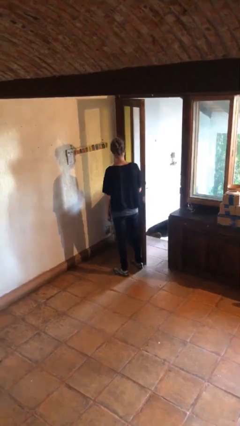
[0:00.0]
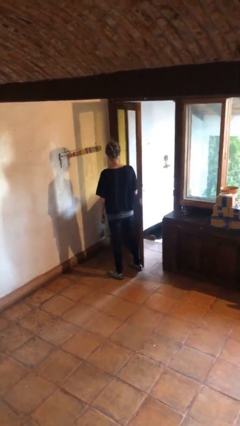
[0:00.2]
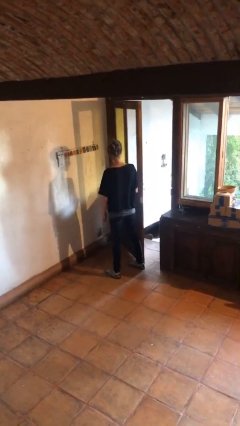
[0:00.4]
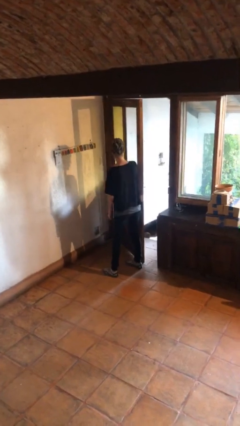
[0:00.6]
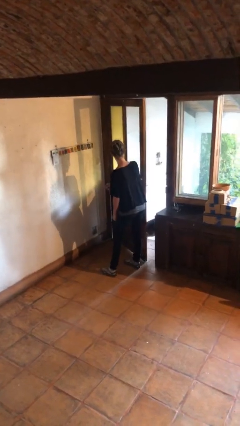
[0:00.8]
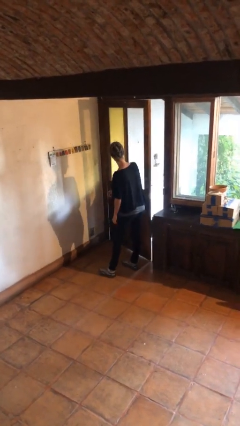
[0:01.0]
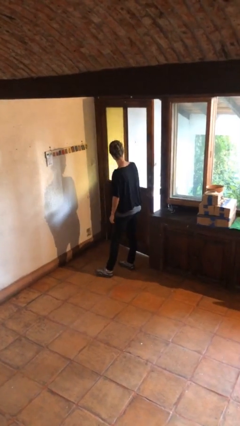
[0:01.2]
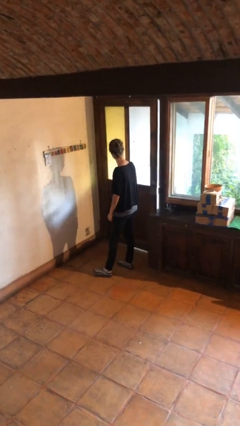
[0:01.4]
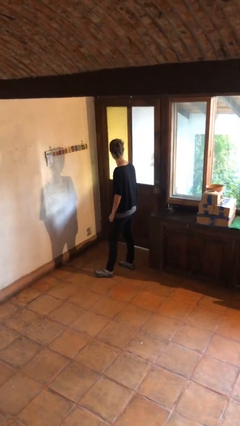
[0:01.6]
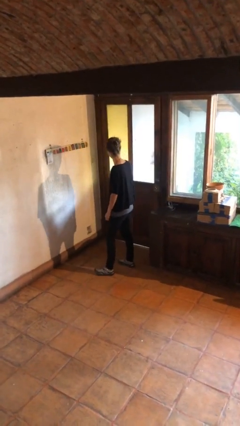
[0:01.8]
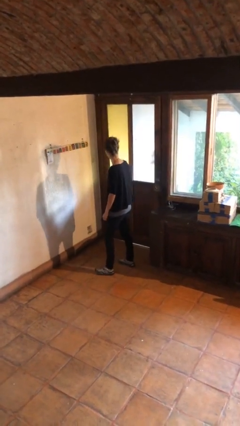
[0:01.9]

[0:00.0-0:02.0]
person closes door with hip

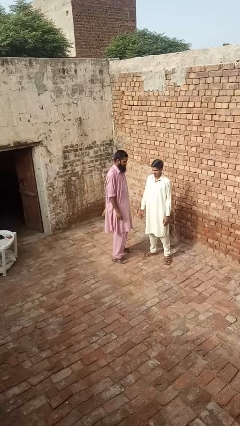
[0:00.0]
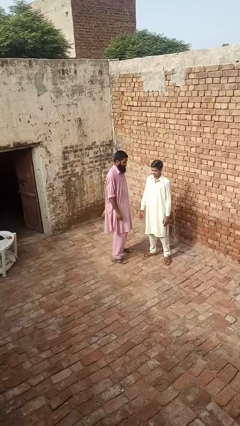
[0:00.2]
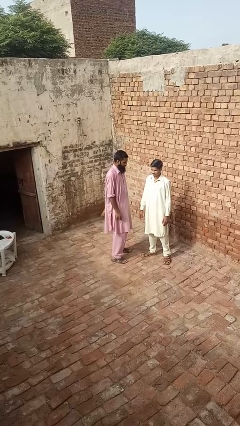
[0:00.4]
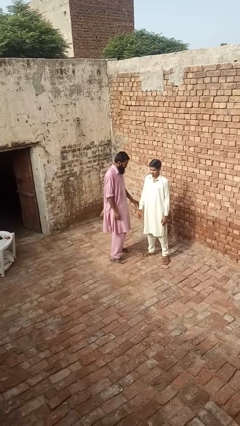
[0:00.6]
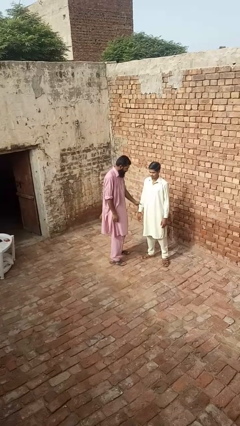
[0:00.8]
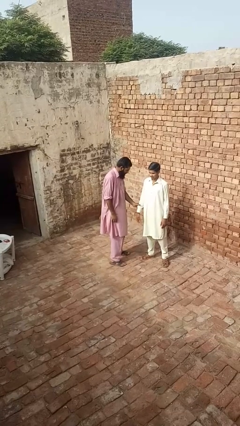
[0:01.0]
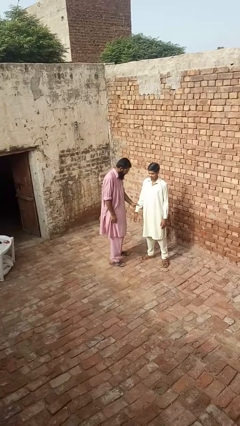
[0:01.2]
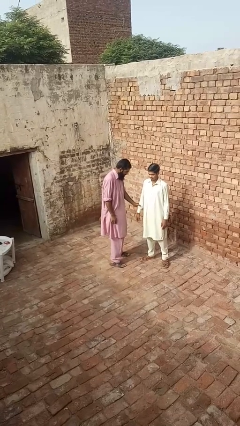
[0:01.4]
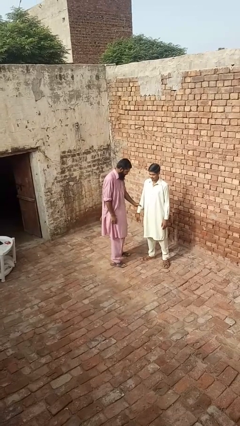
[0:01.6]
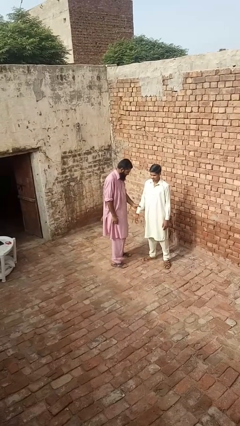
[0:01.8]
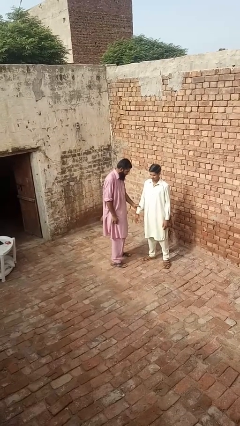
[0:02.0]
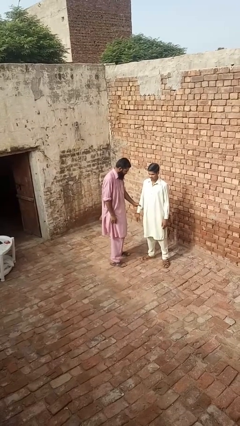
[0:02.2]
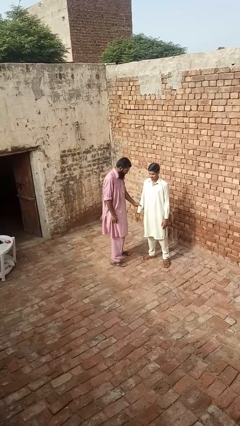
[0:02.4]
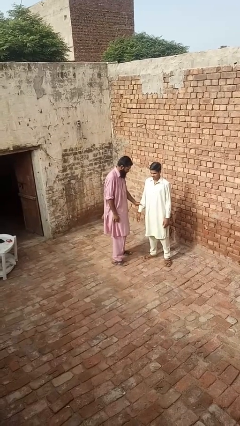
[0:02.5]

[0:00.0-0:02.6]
person grabs person by forearm

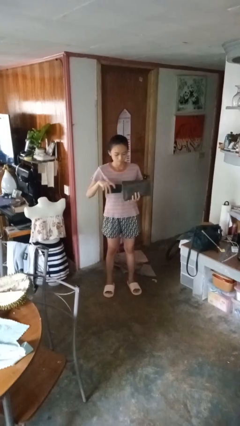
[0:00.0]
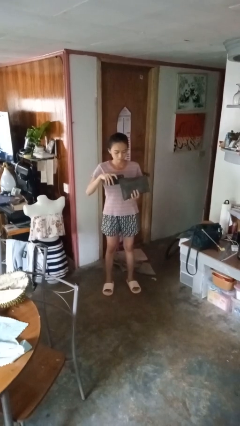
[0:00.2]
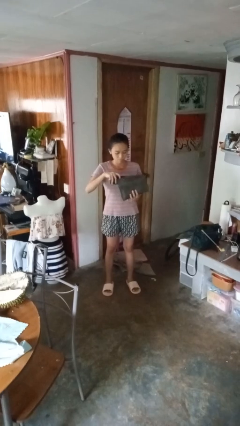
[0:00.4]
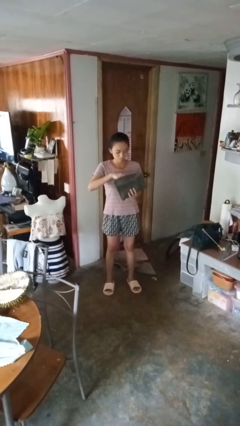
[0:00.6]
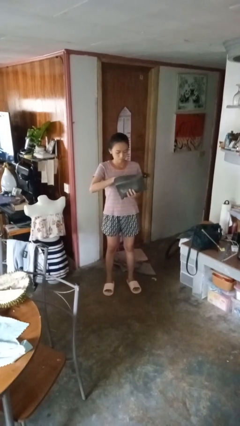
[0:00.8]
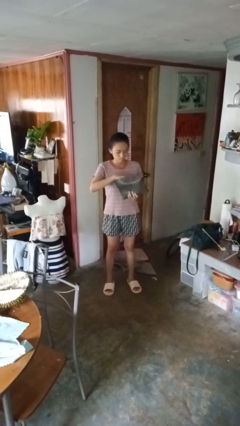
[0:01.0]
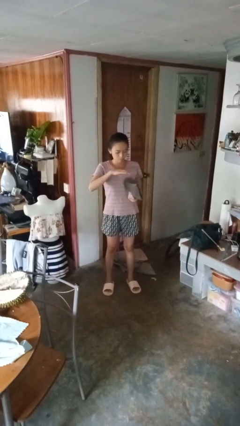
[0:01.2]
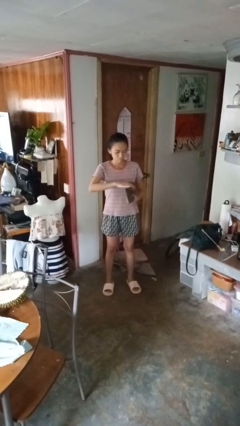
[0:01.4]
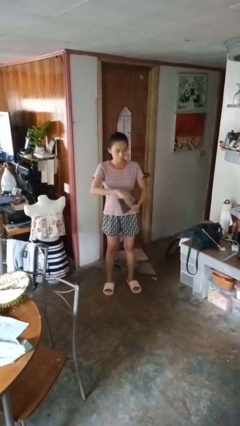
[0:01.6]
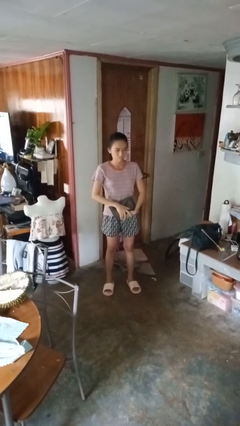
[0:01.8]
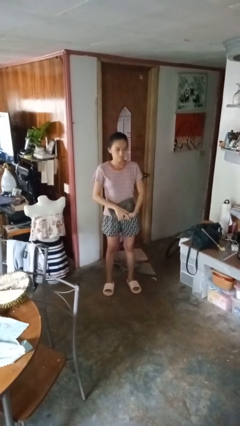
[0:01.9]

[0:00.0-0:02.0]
person puts object into purse

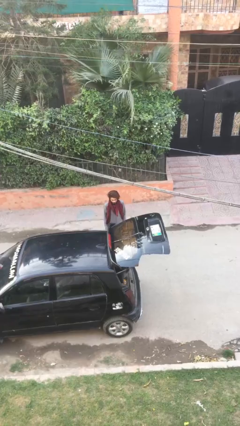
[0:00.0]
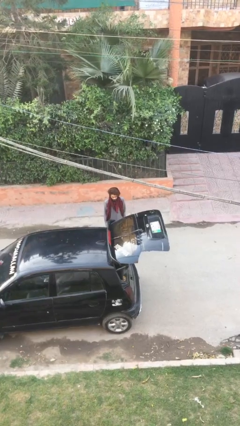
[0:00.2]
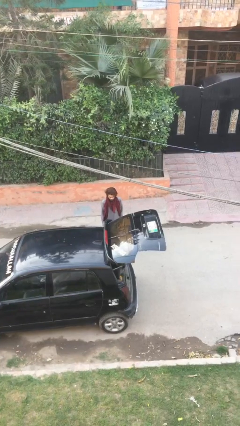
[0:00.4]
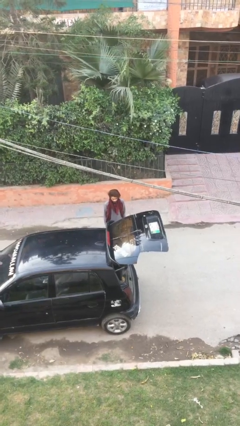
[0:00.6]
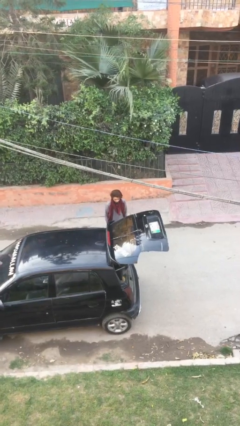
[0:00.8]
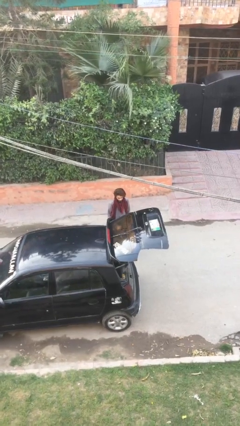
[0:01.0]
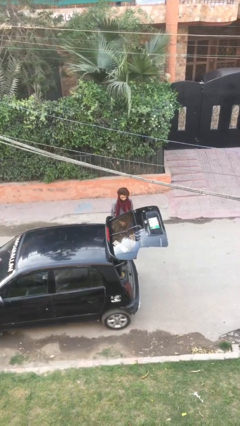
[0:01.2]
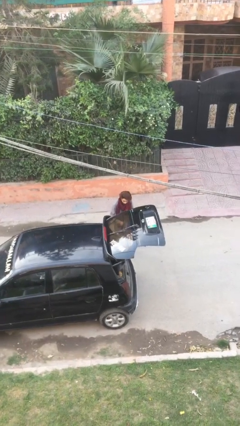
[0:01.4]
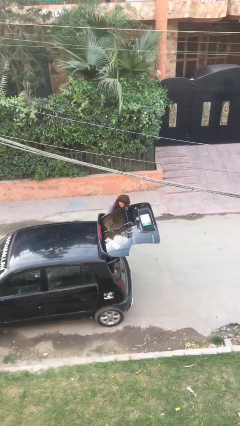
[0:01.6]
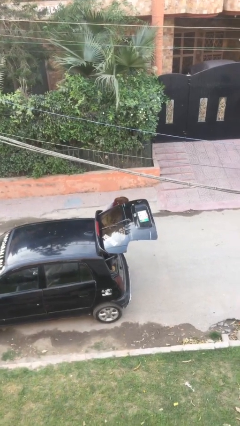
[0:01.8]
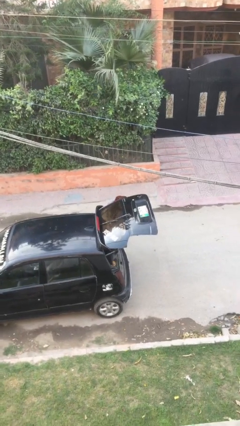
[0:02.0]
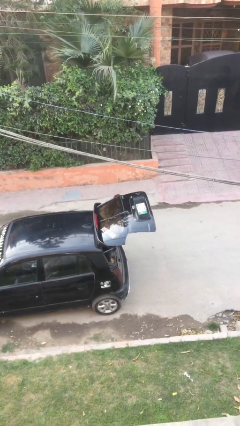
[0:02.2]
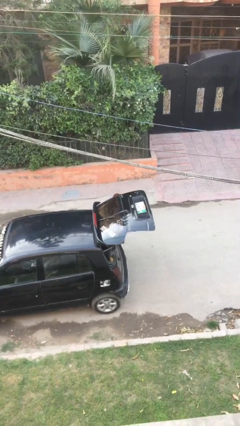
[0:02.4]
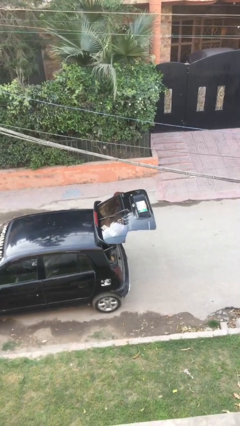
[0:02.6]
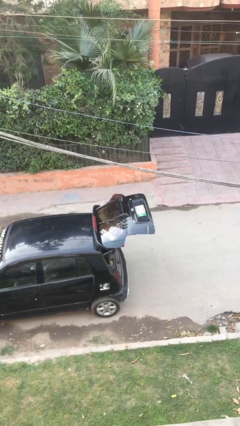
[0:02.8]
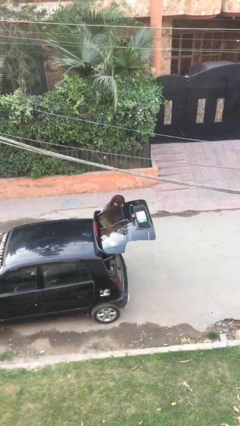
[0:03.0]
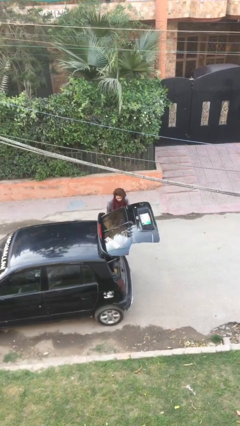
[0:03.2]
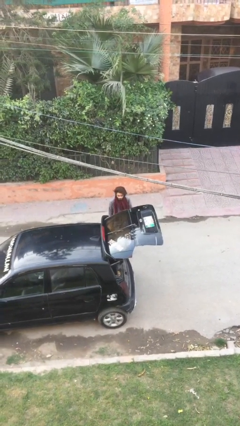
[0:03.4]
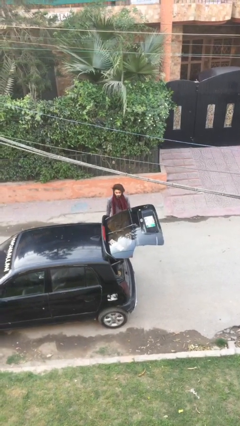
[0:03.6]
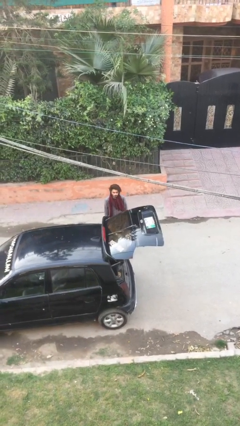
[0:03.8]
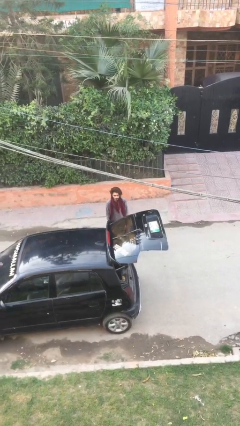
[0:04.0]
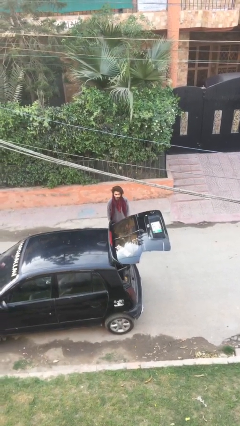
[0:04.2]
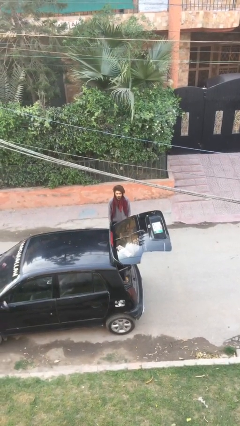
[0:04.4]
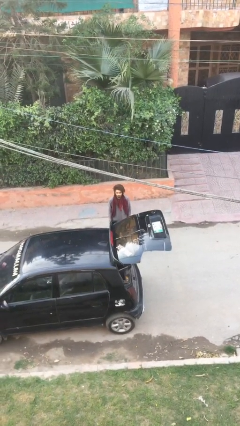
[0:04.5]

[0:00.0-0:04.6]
person loads car

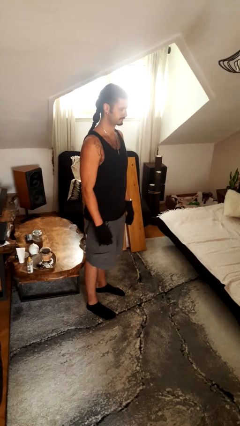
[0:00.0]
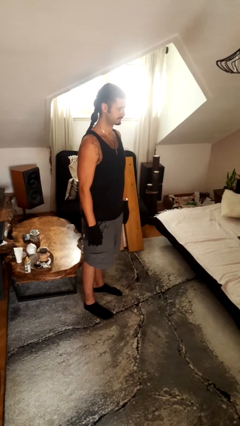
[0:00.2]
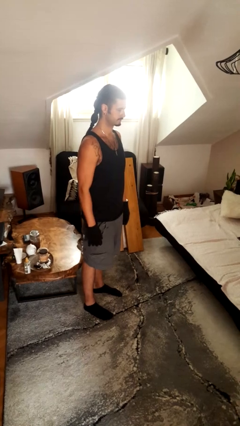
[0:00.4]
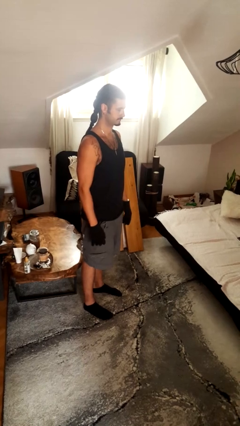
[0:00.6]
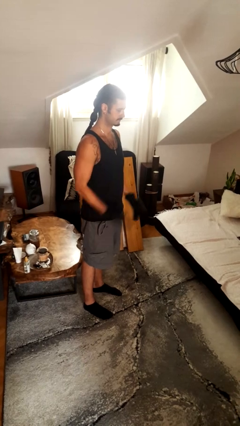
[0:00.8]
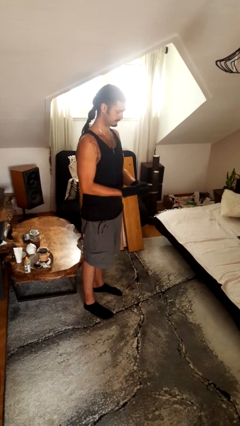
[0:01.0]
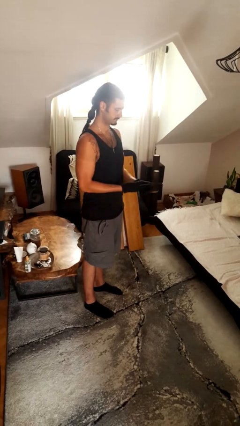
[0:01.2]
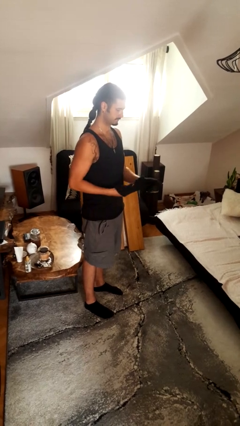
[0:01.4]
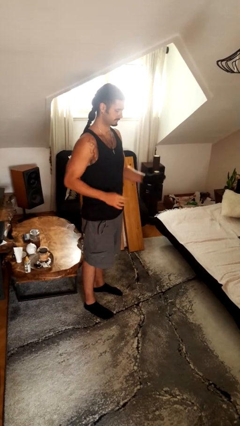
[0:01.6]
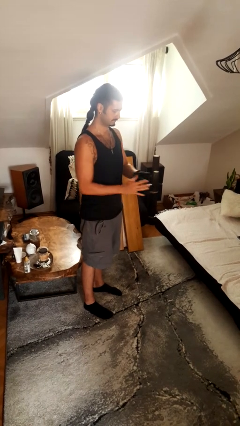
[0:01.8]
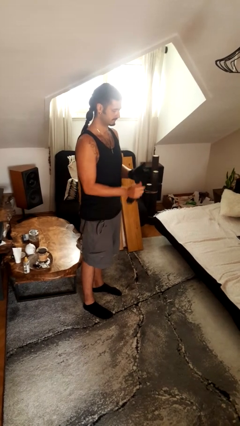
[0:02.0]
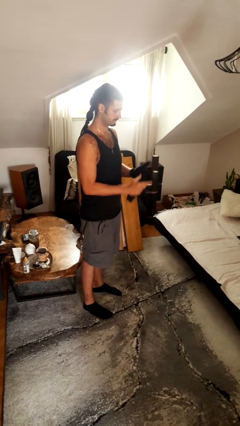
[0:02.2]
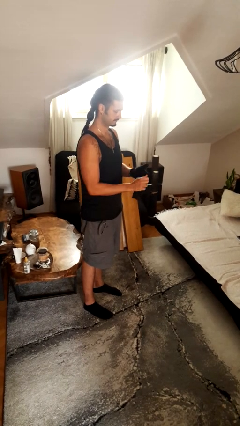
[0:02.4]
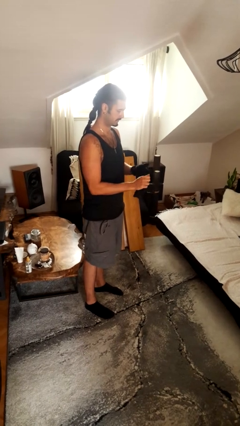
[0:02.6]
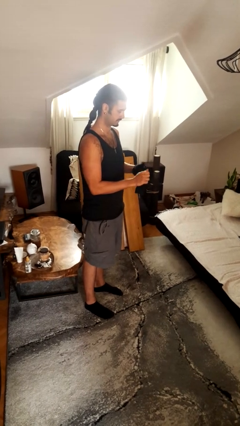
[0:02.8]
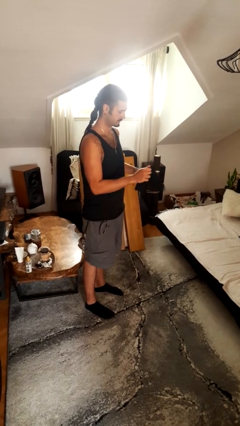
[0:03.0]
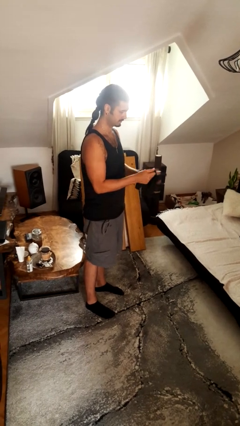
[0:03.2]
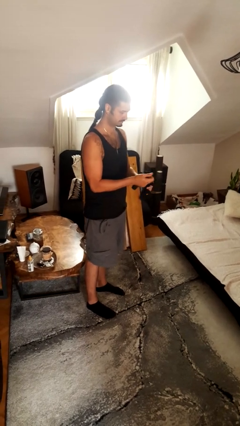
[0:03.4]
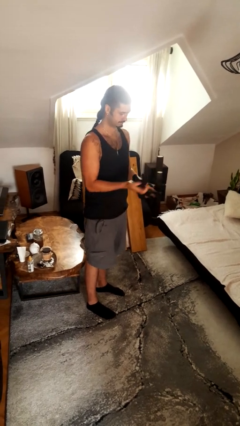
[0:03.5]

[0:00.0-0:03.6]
person takes off gloves

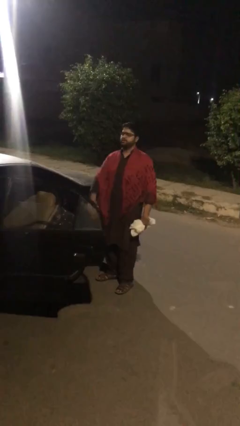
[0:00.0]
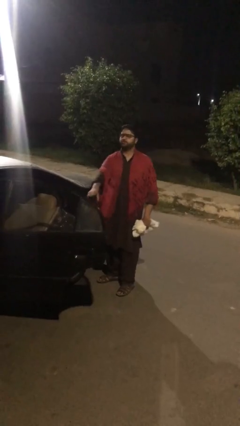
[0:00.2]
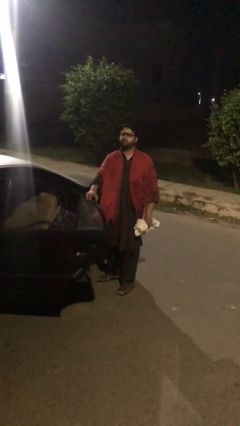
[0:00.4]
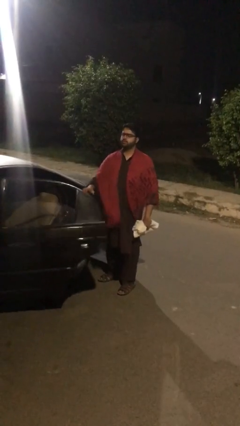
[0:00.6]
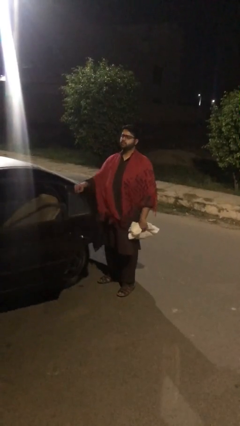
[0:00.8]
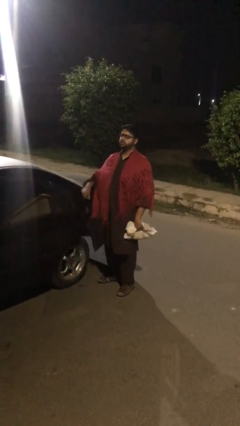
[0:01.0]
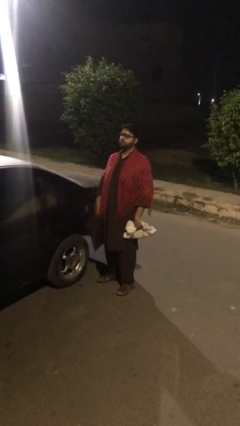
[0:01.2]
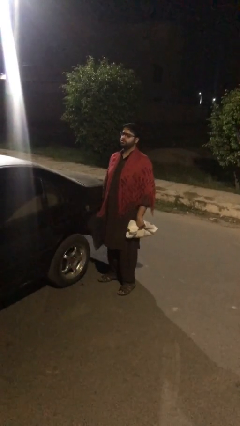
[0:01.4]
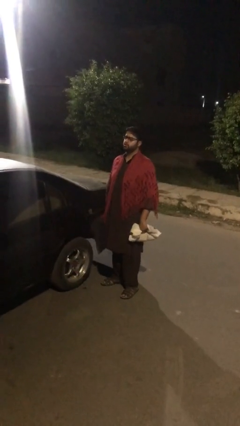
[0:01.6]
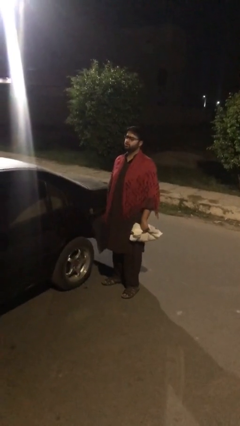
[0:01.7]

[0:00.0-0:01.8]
person closes car door

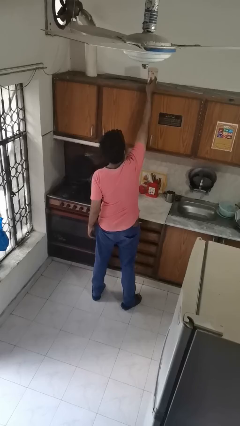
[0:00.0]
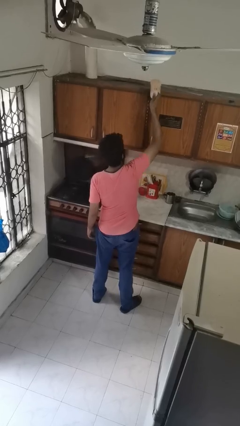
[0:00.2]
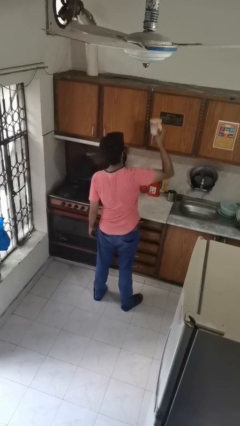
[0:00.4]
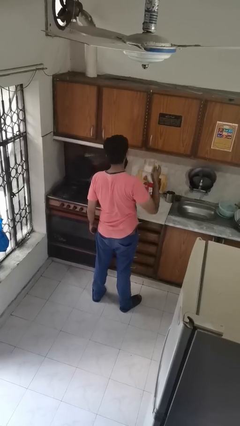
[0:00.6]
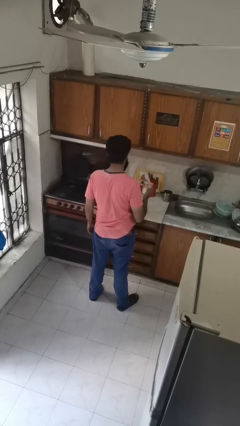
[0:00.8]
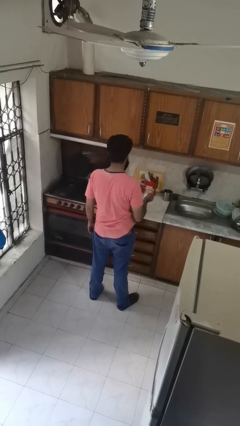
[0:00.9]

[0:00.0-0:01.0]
person picks up object from shelf
